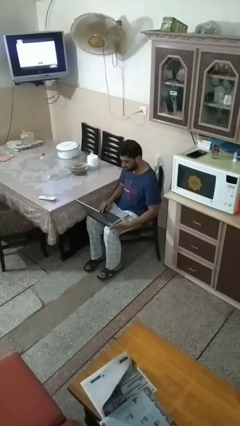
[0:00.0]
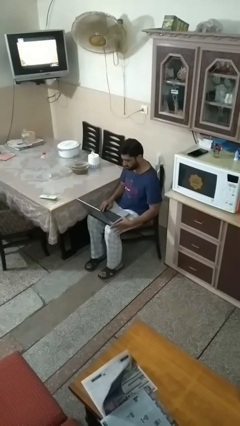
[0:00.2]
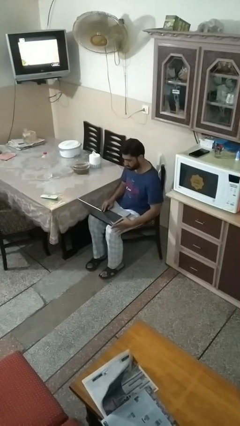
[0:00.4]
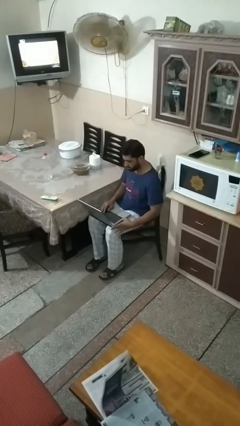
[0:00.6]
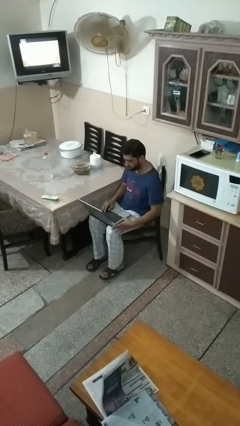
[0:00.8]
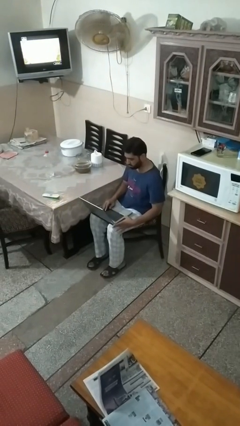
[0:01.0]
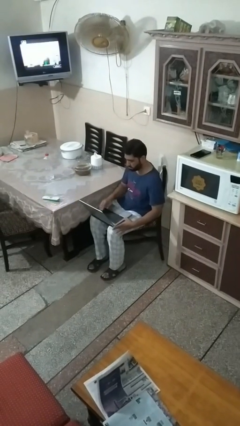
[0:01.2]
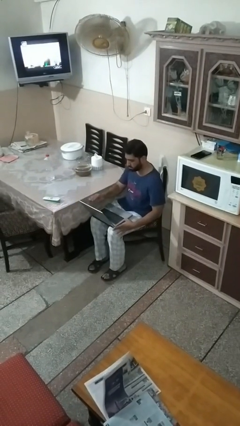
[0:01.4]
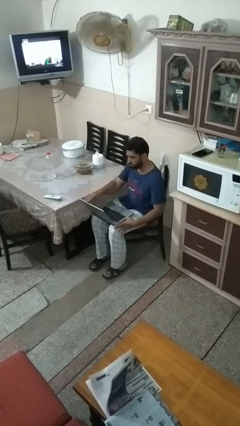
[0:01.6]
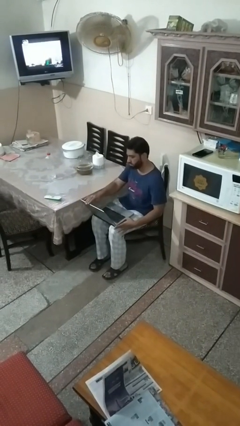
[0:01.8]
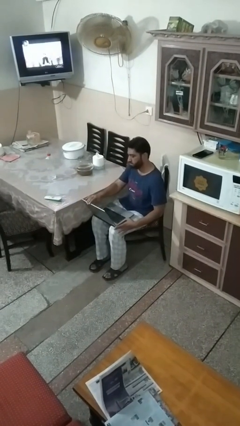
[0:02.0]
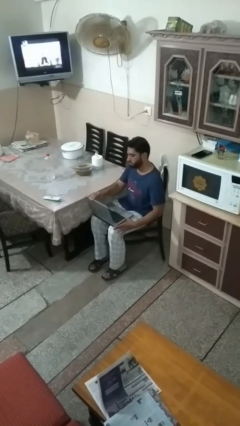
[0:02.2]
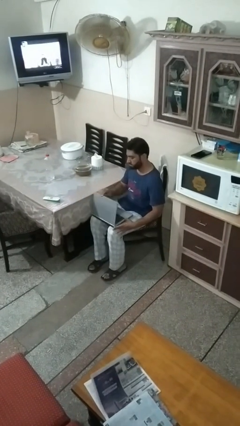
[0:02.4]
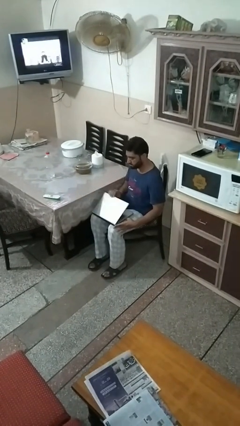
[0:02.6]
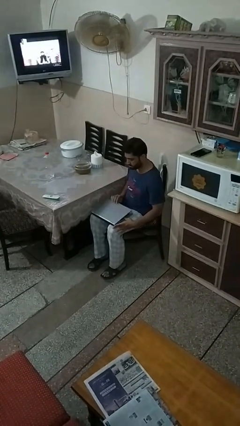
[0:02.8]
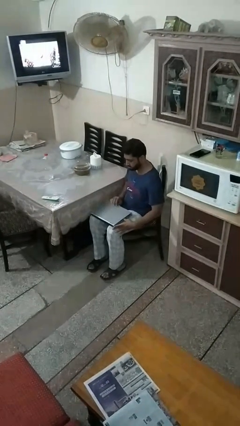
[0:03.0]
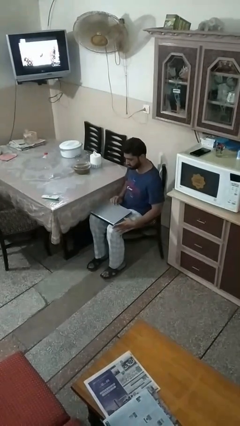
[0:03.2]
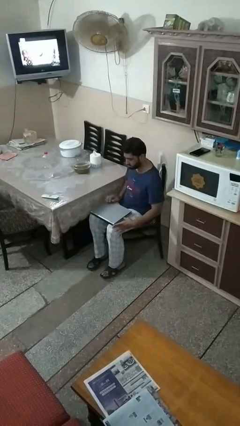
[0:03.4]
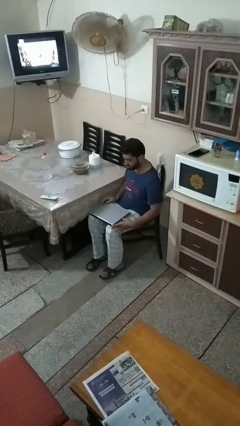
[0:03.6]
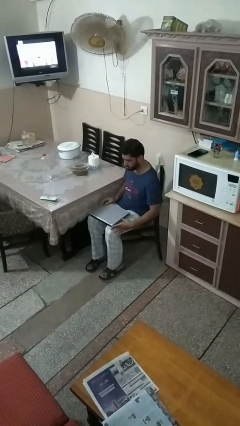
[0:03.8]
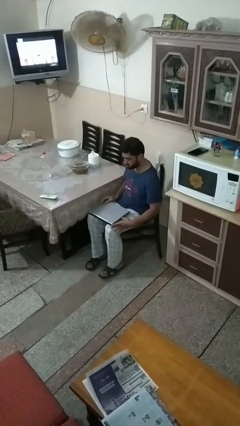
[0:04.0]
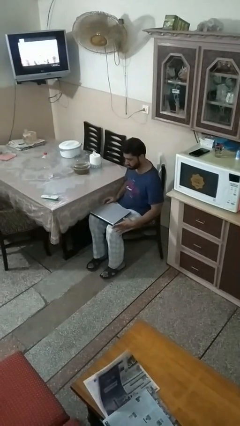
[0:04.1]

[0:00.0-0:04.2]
person closes laptop

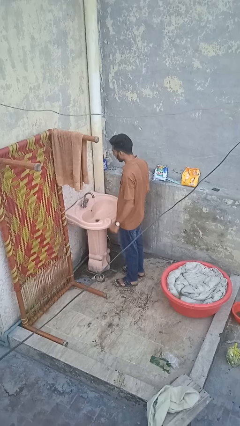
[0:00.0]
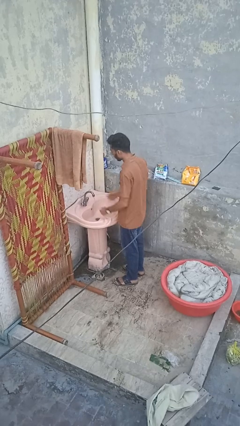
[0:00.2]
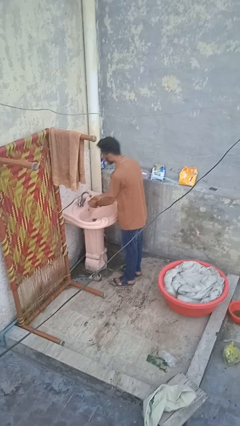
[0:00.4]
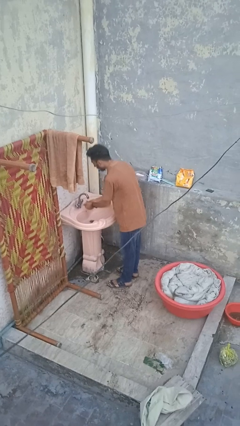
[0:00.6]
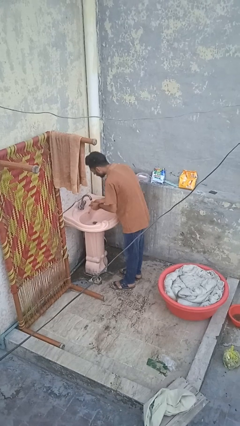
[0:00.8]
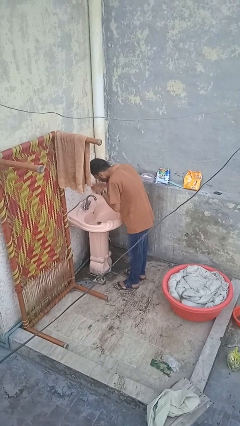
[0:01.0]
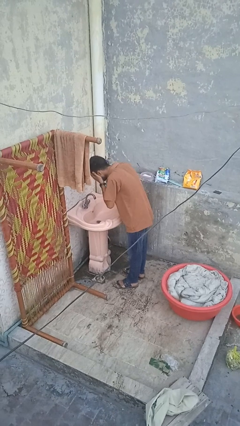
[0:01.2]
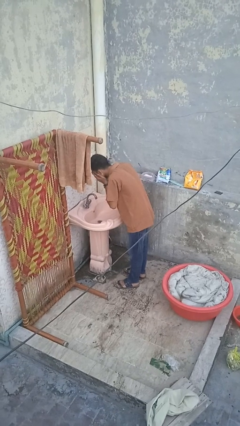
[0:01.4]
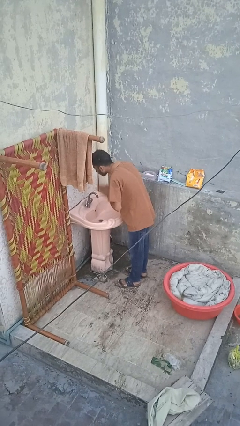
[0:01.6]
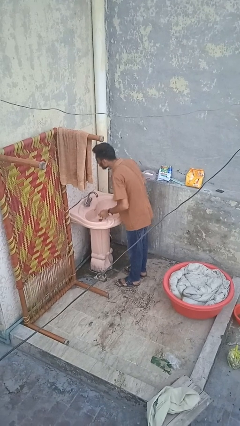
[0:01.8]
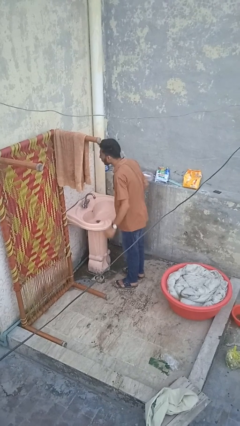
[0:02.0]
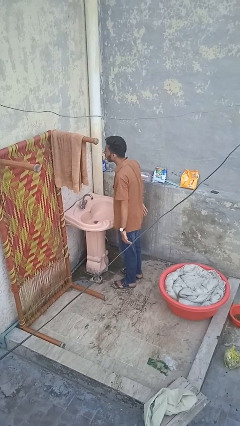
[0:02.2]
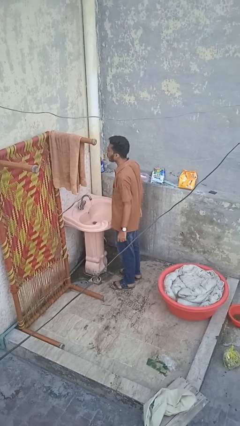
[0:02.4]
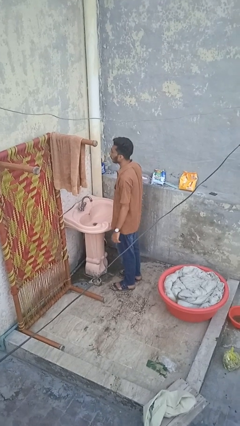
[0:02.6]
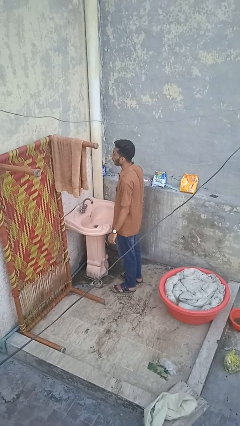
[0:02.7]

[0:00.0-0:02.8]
person washes face

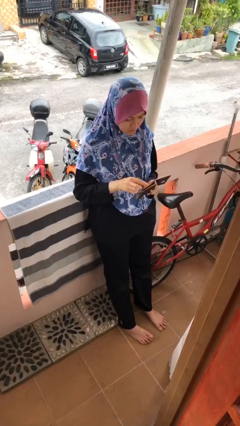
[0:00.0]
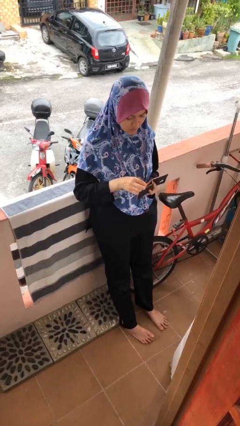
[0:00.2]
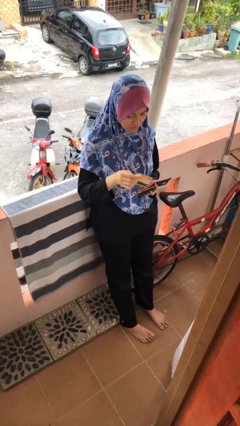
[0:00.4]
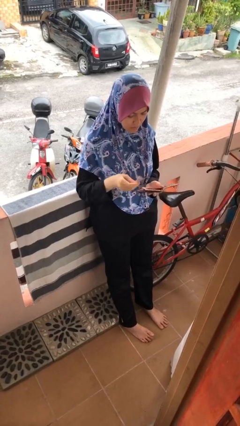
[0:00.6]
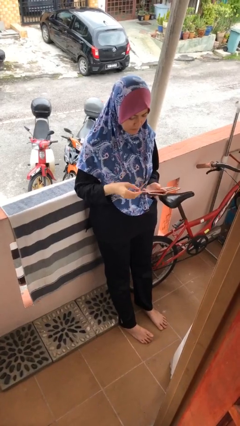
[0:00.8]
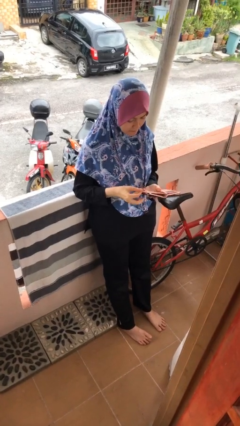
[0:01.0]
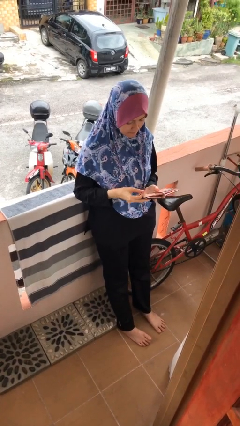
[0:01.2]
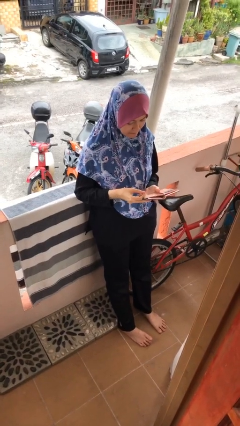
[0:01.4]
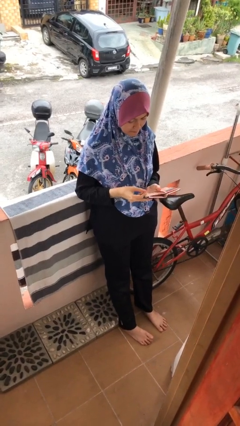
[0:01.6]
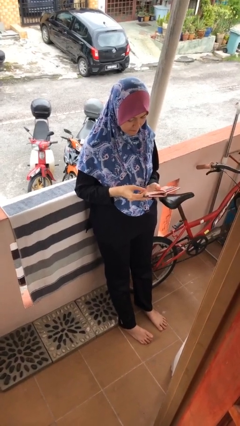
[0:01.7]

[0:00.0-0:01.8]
person takes object from purse

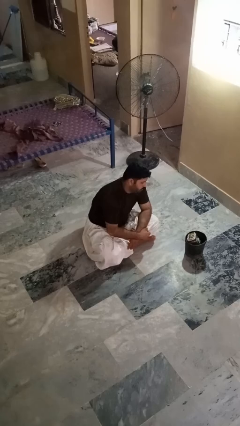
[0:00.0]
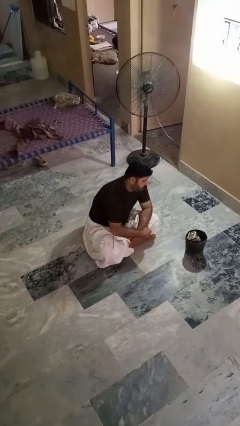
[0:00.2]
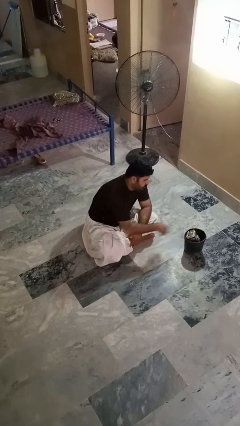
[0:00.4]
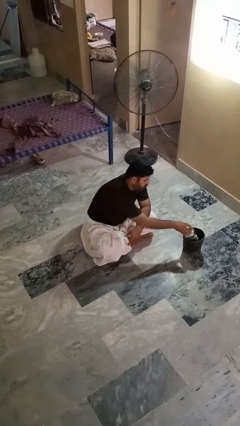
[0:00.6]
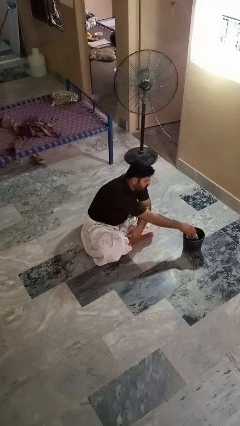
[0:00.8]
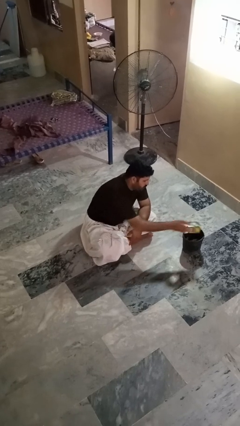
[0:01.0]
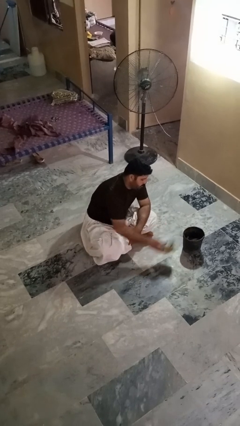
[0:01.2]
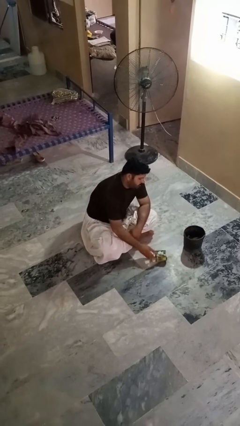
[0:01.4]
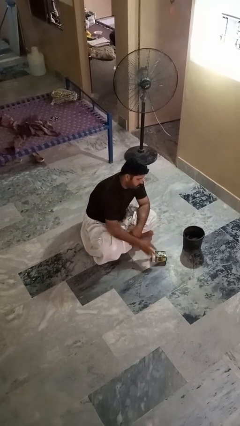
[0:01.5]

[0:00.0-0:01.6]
person takes object from basket

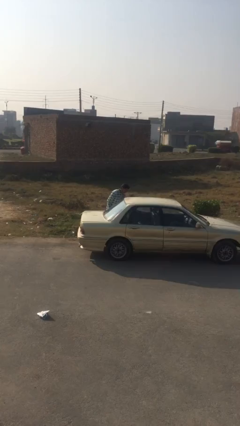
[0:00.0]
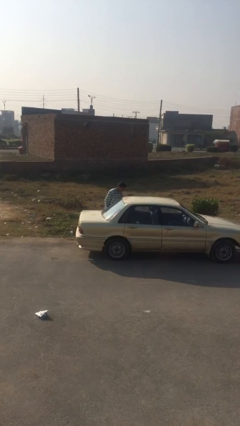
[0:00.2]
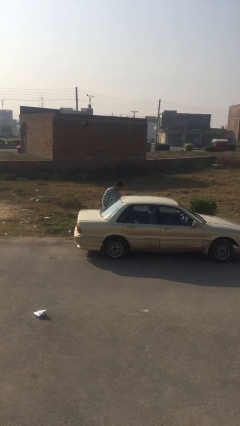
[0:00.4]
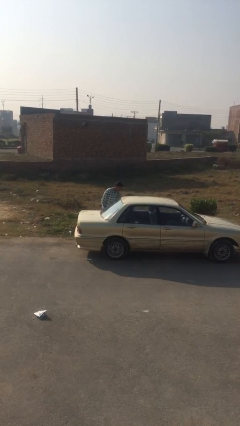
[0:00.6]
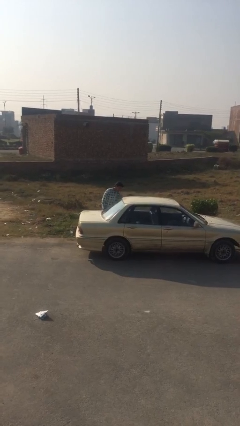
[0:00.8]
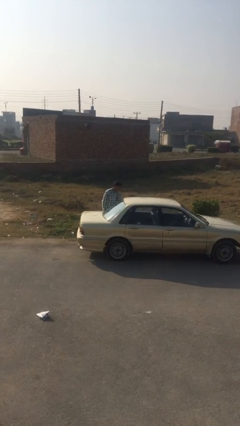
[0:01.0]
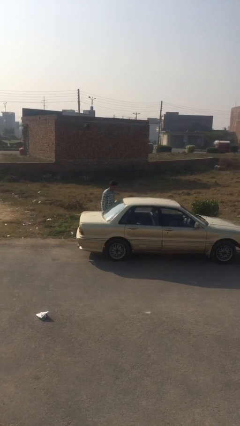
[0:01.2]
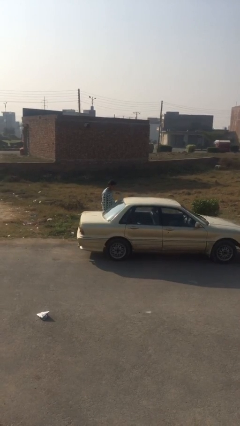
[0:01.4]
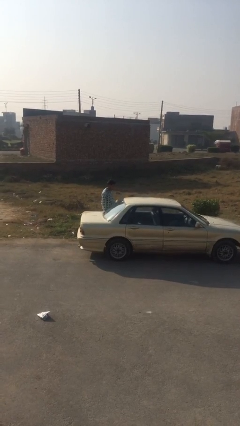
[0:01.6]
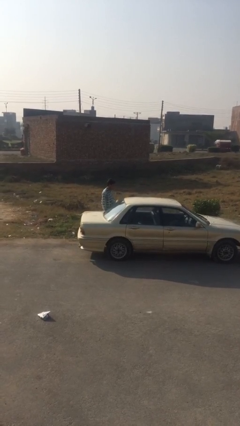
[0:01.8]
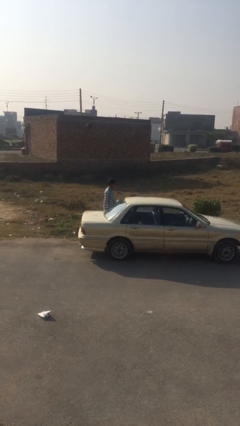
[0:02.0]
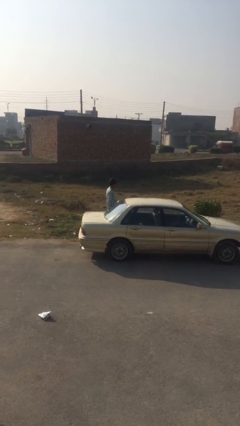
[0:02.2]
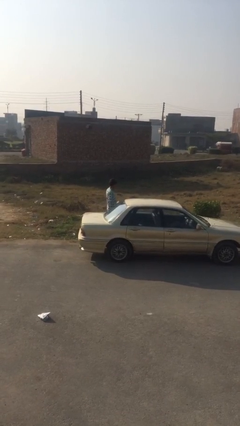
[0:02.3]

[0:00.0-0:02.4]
person closes car door

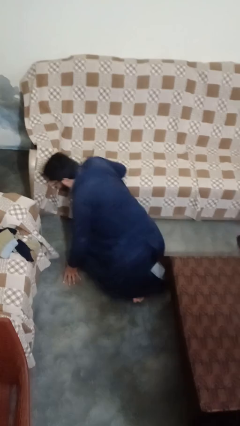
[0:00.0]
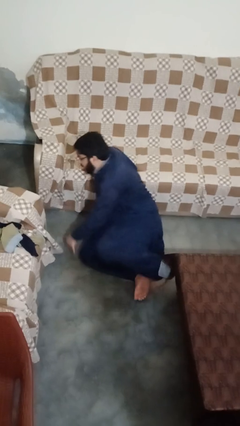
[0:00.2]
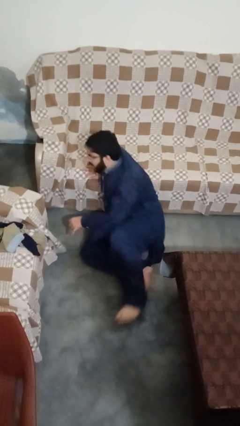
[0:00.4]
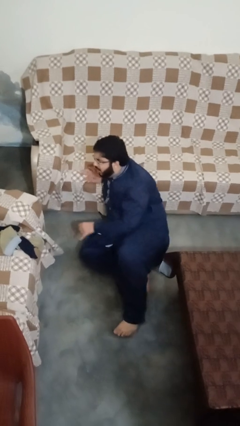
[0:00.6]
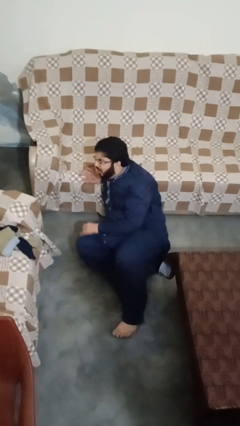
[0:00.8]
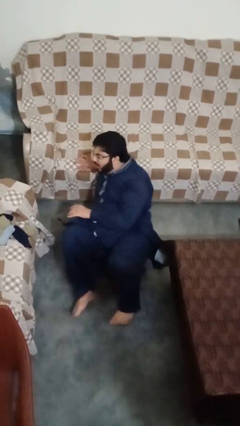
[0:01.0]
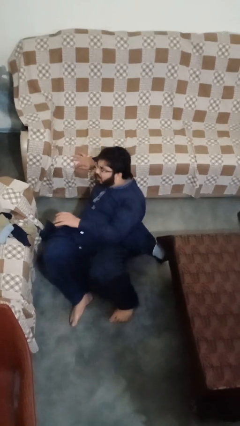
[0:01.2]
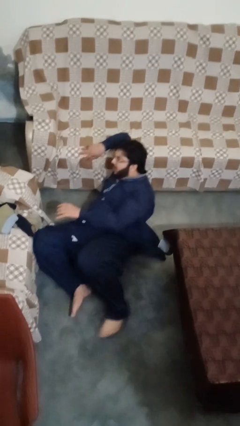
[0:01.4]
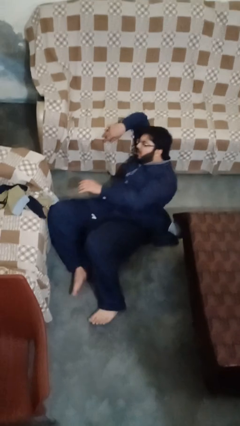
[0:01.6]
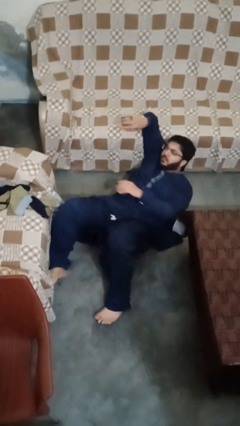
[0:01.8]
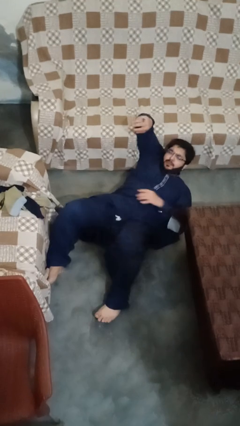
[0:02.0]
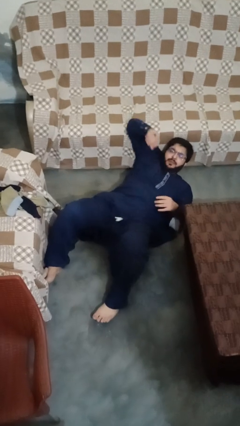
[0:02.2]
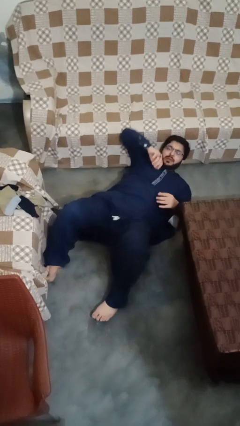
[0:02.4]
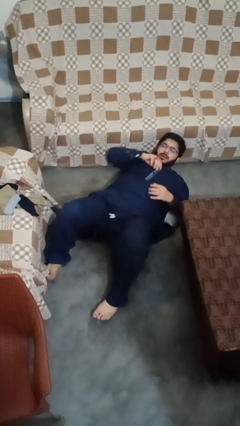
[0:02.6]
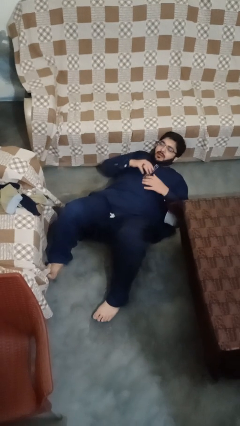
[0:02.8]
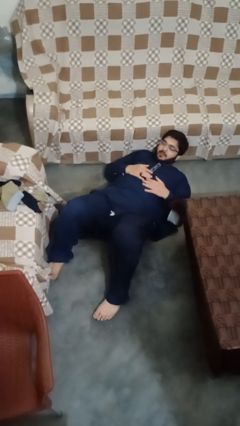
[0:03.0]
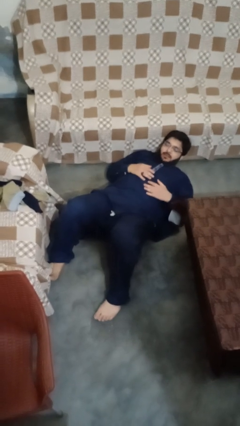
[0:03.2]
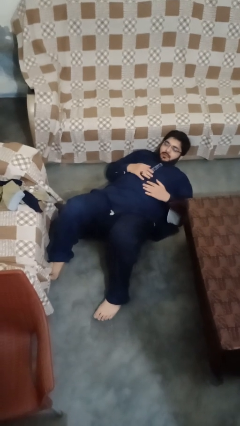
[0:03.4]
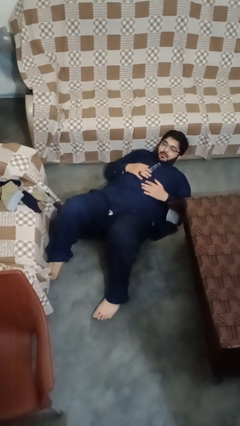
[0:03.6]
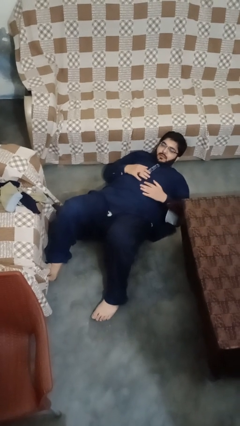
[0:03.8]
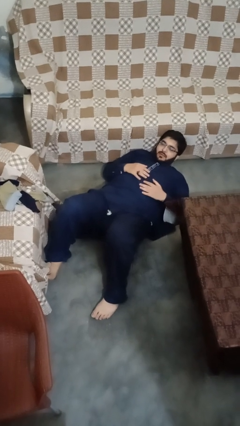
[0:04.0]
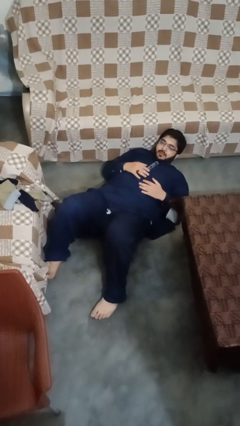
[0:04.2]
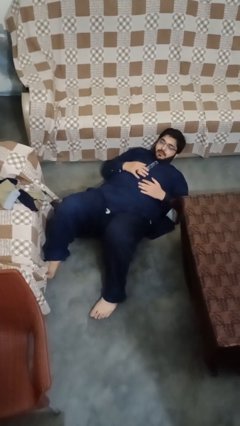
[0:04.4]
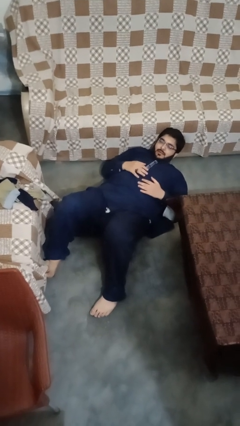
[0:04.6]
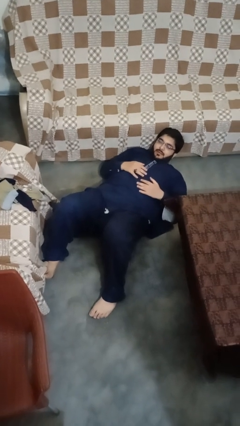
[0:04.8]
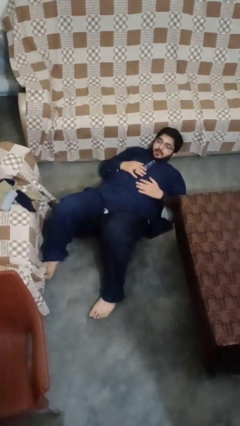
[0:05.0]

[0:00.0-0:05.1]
person lies down on floor
